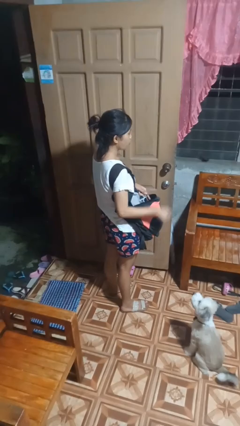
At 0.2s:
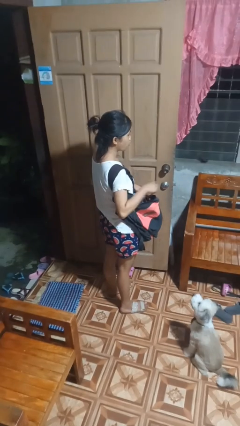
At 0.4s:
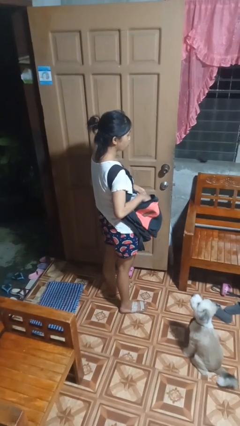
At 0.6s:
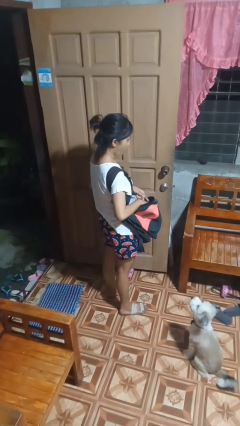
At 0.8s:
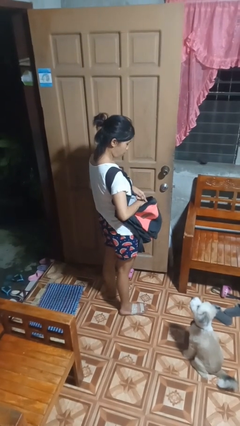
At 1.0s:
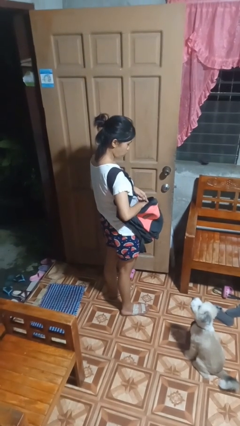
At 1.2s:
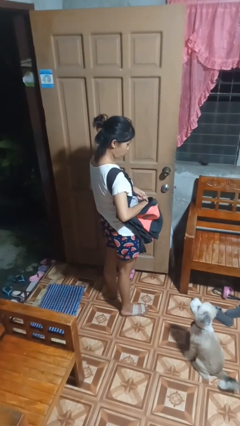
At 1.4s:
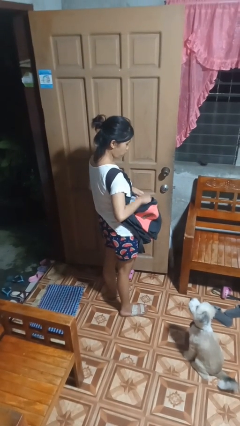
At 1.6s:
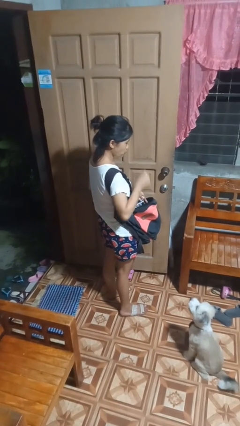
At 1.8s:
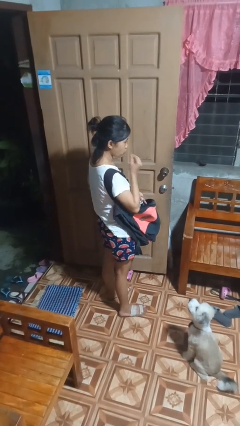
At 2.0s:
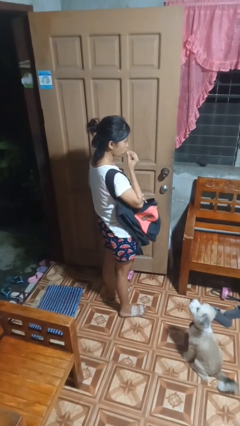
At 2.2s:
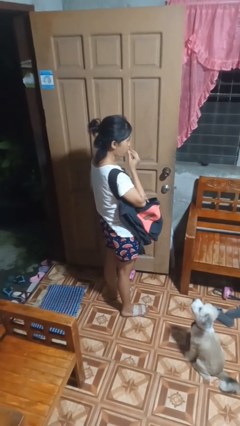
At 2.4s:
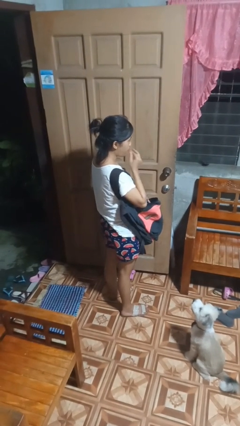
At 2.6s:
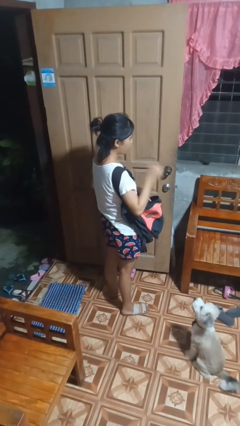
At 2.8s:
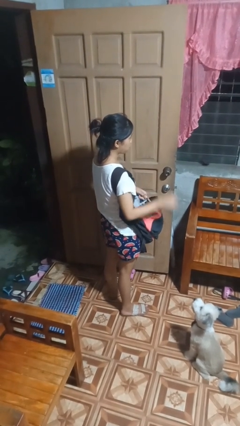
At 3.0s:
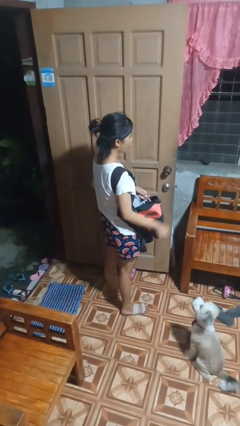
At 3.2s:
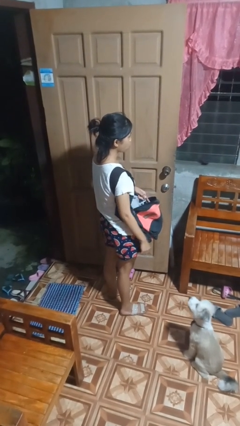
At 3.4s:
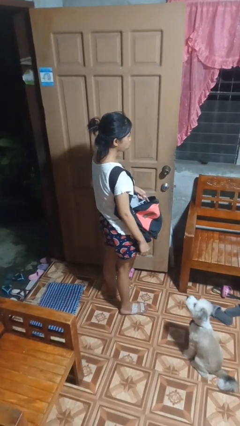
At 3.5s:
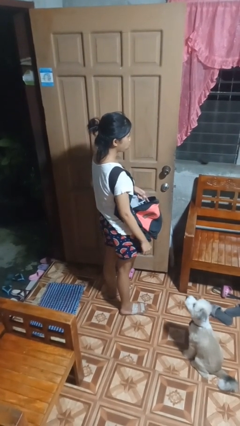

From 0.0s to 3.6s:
person eats snack from bag

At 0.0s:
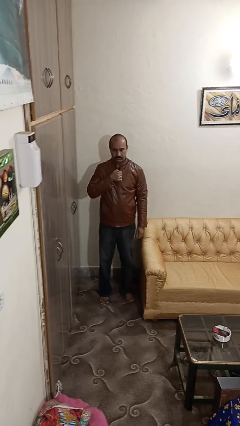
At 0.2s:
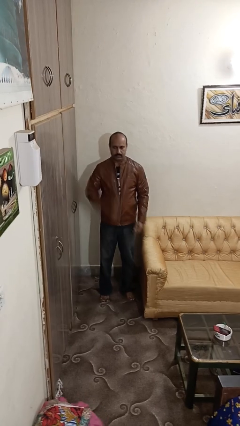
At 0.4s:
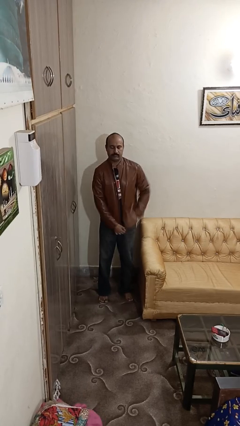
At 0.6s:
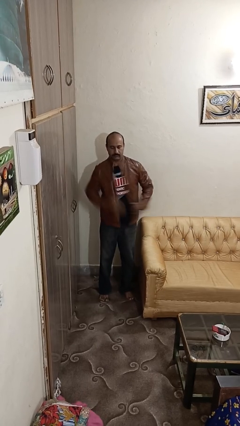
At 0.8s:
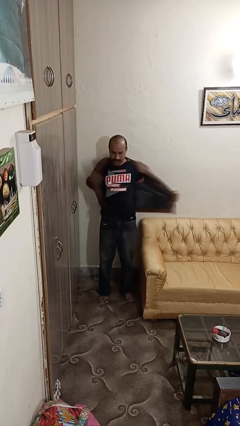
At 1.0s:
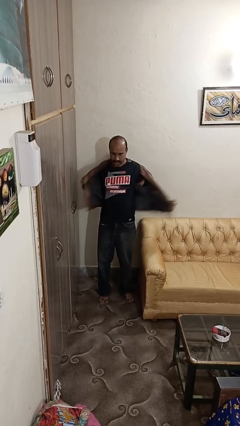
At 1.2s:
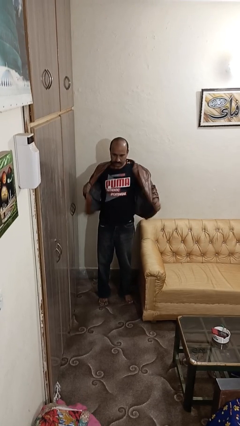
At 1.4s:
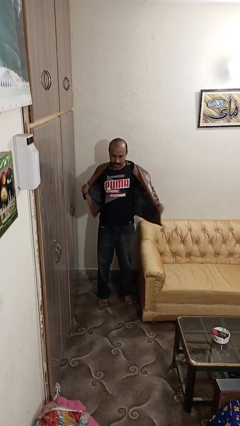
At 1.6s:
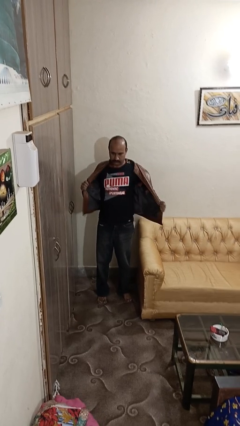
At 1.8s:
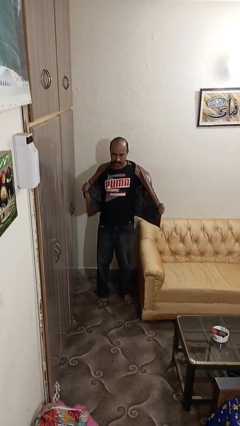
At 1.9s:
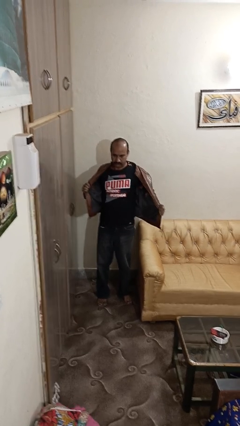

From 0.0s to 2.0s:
person unzips jacket

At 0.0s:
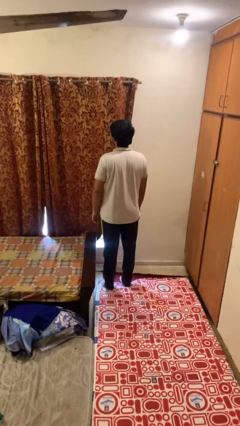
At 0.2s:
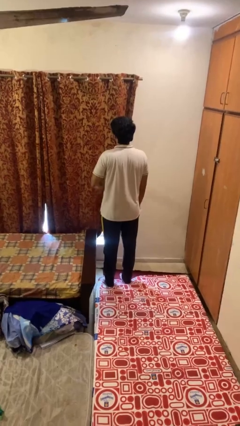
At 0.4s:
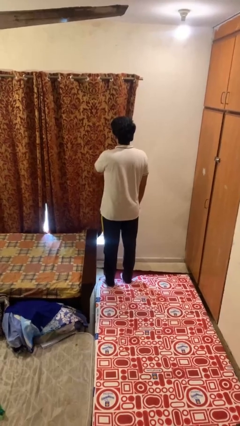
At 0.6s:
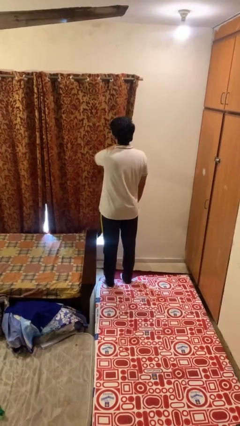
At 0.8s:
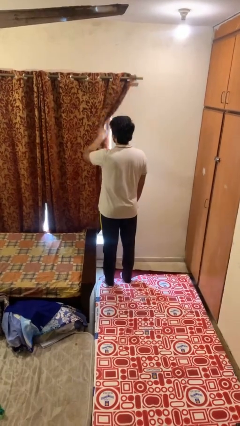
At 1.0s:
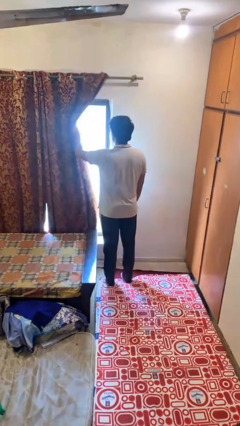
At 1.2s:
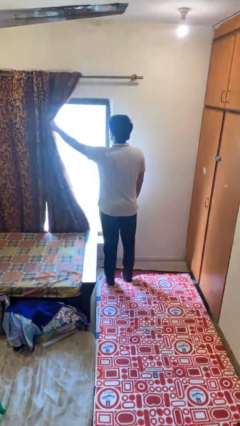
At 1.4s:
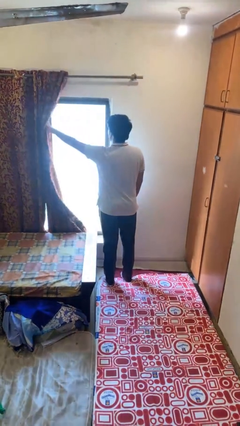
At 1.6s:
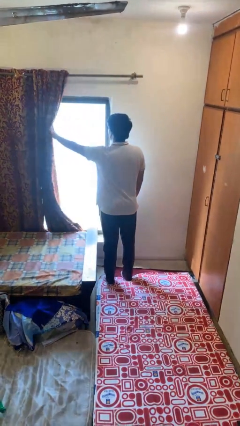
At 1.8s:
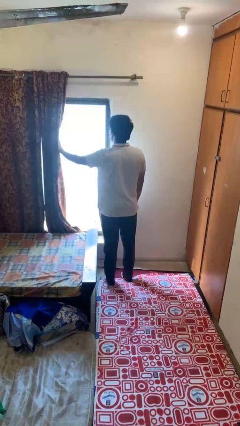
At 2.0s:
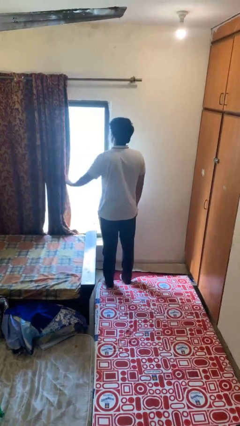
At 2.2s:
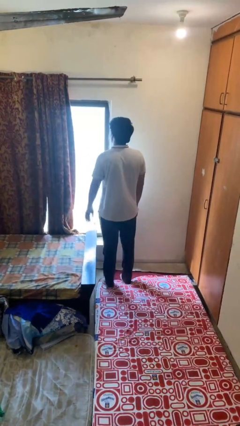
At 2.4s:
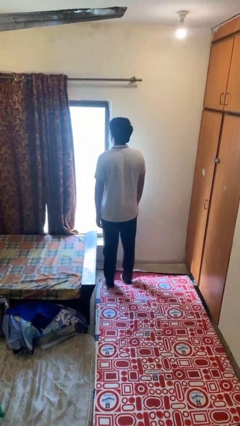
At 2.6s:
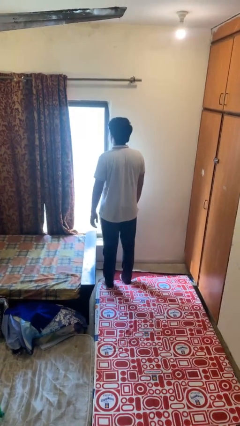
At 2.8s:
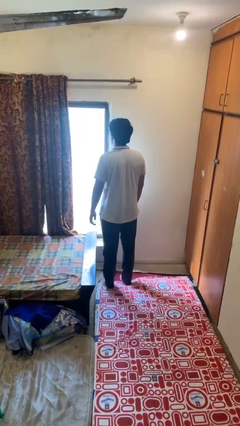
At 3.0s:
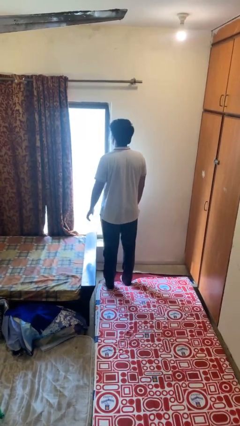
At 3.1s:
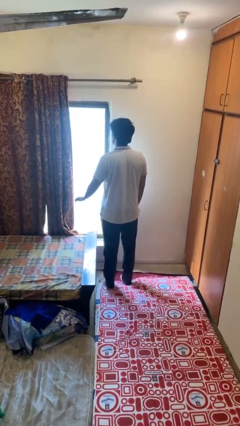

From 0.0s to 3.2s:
person opens curtains

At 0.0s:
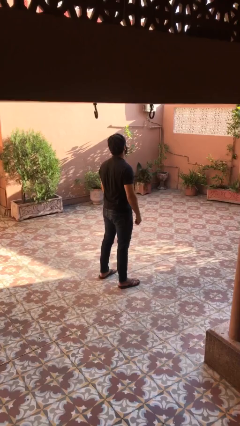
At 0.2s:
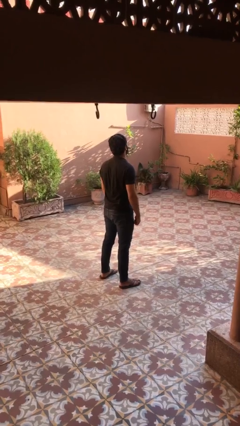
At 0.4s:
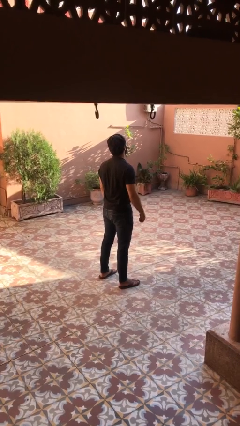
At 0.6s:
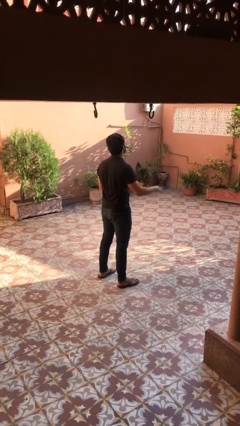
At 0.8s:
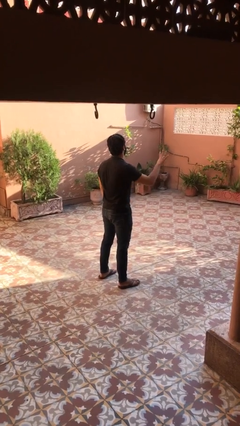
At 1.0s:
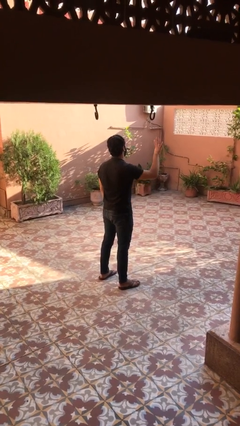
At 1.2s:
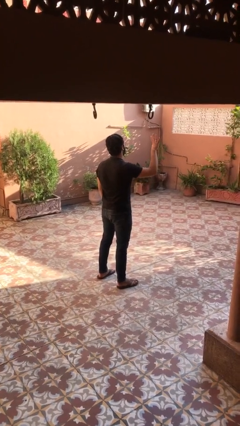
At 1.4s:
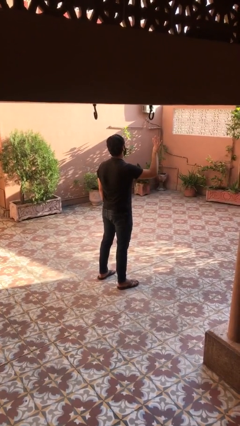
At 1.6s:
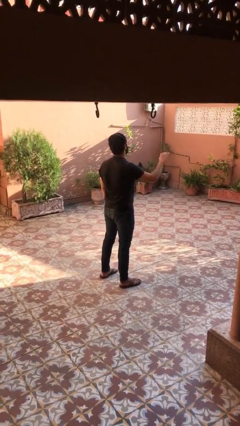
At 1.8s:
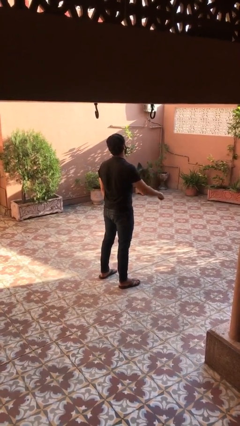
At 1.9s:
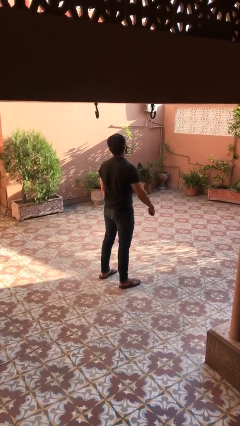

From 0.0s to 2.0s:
person gestures number four

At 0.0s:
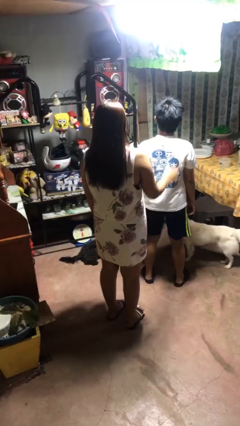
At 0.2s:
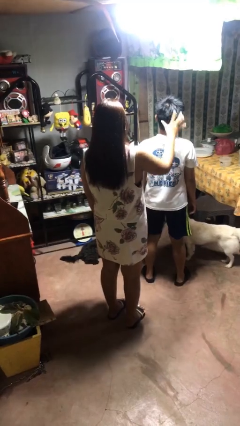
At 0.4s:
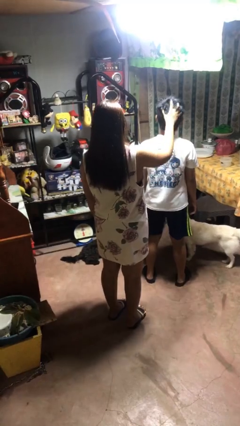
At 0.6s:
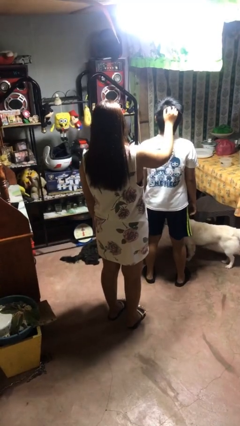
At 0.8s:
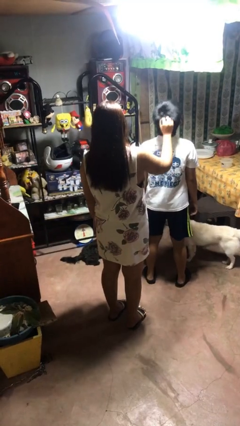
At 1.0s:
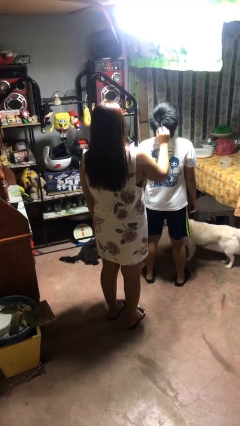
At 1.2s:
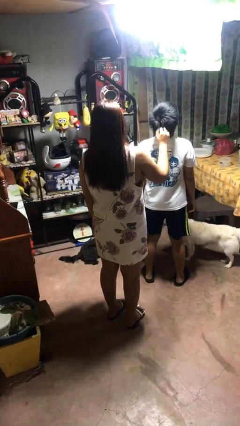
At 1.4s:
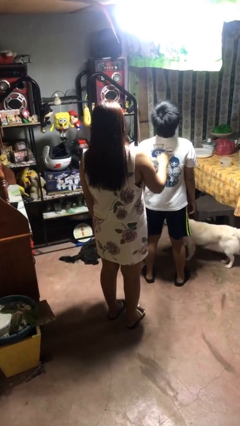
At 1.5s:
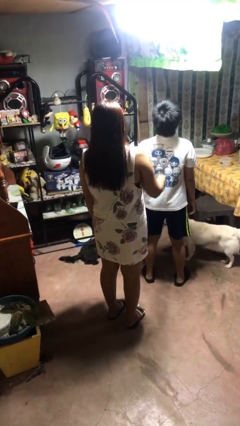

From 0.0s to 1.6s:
person grabs person by hair

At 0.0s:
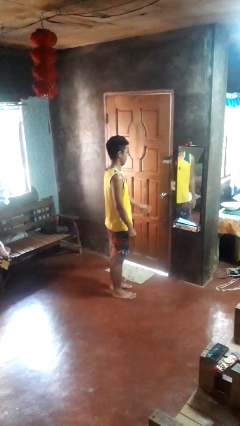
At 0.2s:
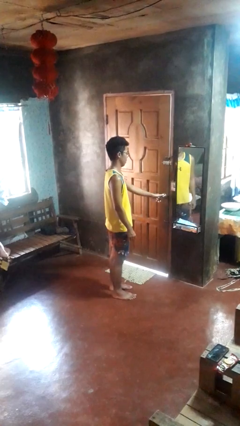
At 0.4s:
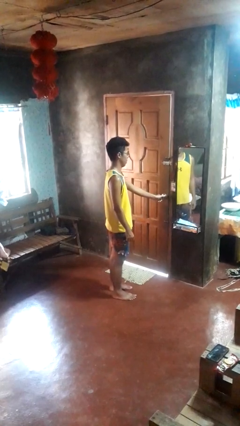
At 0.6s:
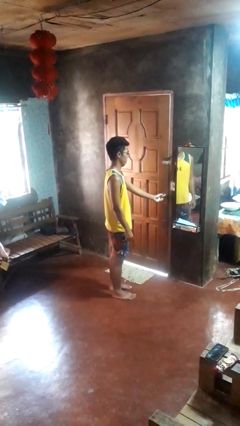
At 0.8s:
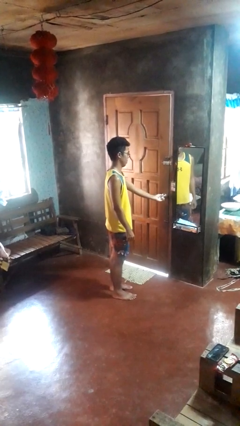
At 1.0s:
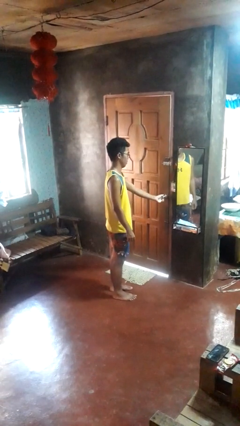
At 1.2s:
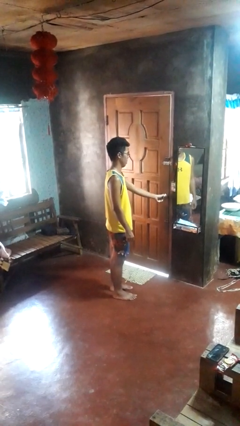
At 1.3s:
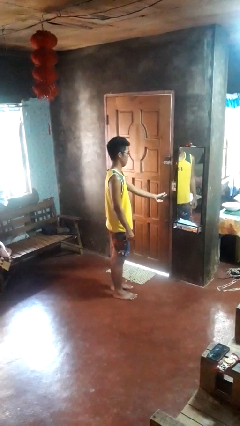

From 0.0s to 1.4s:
person unlocks door with keys

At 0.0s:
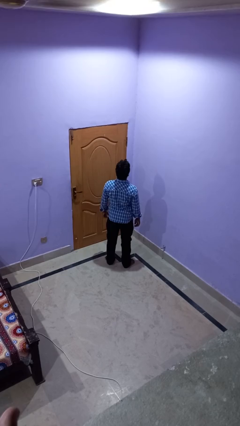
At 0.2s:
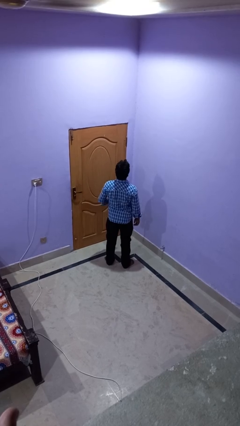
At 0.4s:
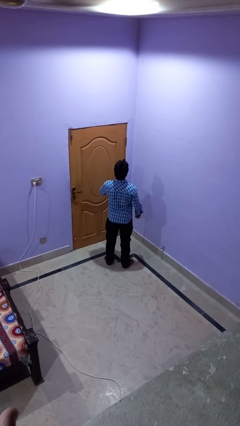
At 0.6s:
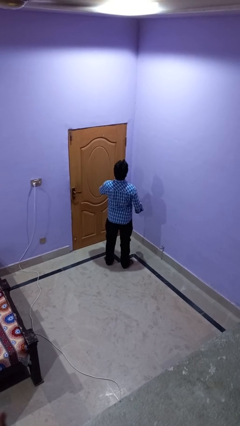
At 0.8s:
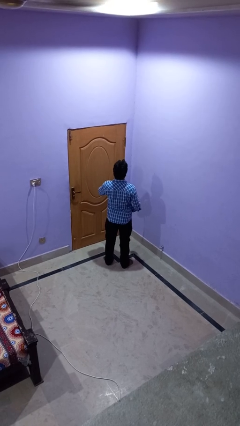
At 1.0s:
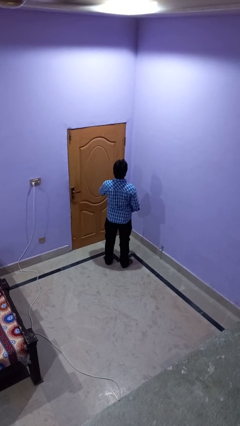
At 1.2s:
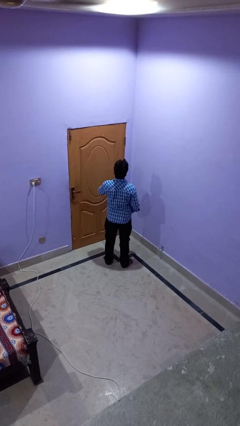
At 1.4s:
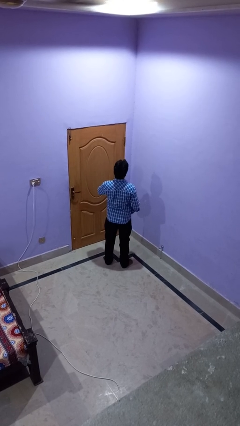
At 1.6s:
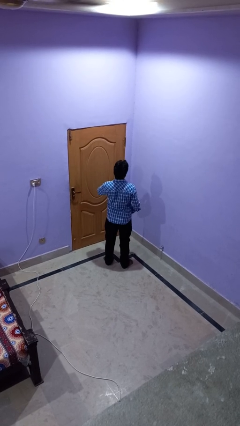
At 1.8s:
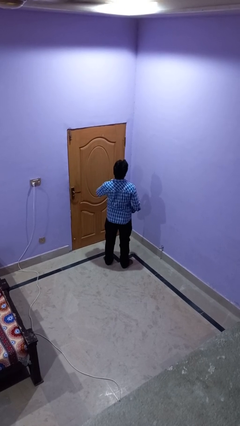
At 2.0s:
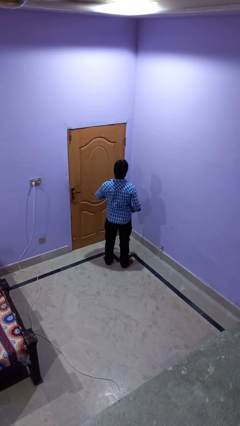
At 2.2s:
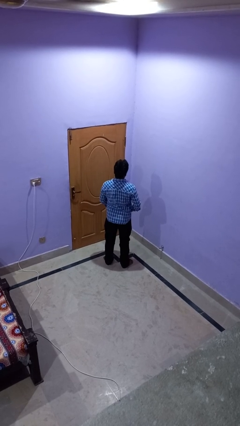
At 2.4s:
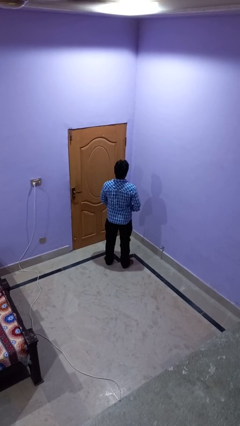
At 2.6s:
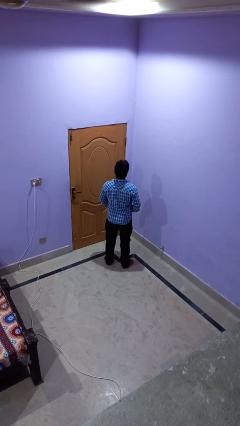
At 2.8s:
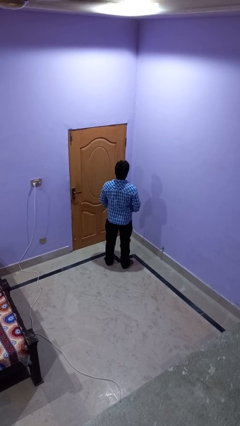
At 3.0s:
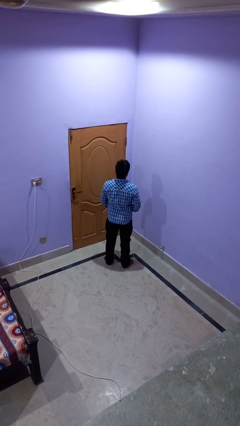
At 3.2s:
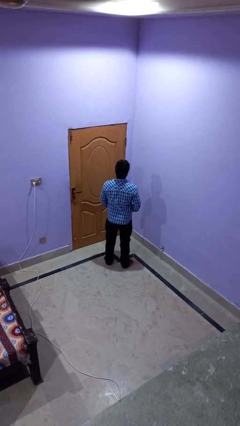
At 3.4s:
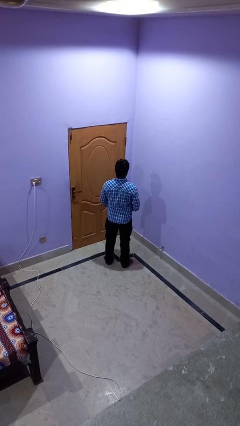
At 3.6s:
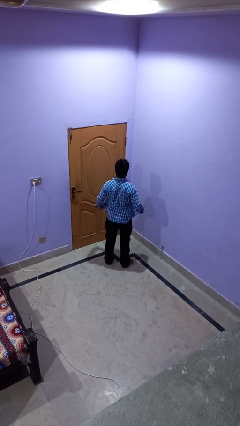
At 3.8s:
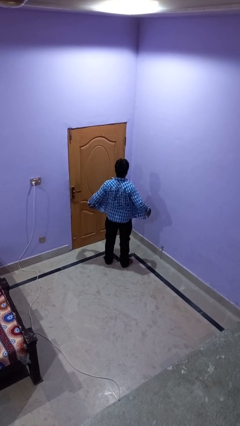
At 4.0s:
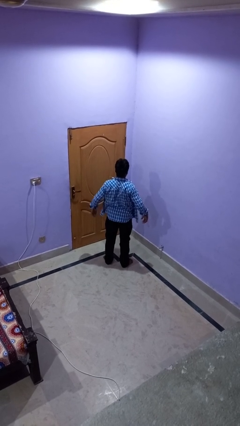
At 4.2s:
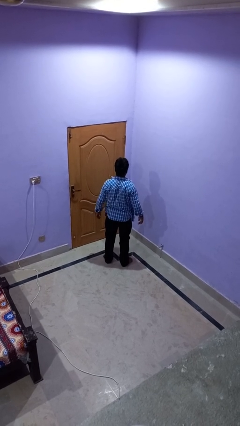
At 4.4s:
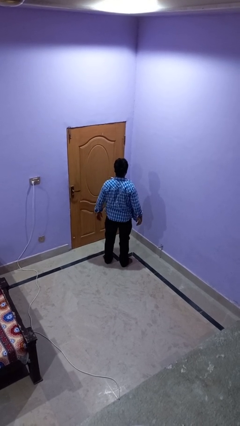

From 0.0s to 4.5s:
person unbuttons shirt
